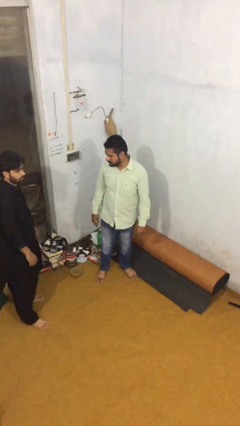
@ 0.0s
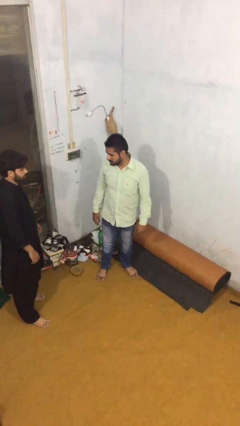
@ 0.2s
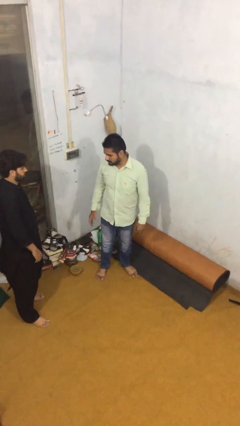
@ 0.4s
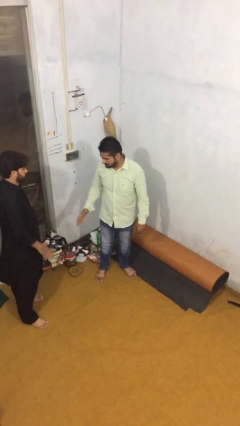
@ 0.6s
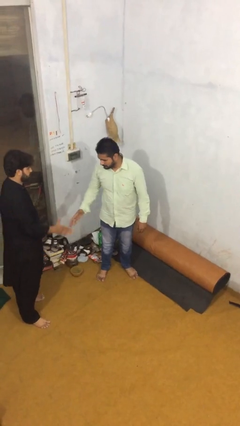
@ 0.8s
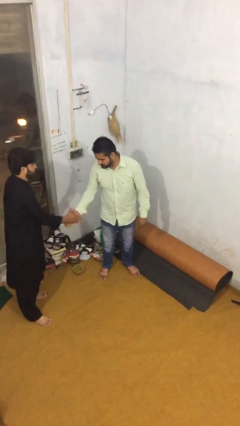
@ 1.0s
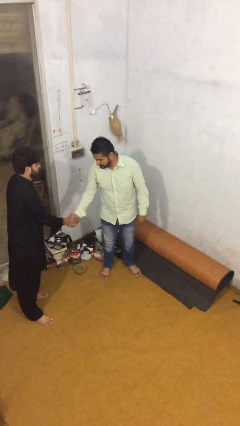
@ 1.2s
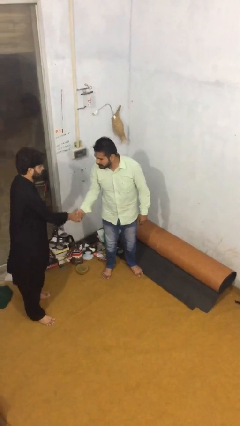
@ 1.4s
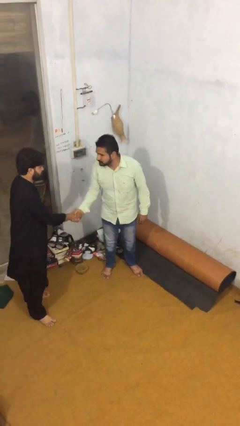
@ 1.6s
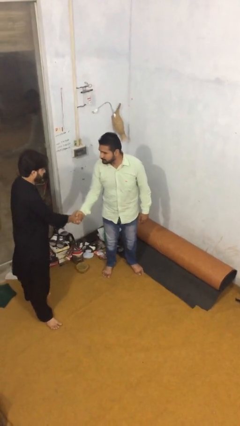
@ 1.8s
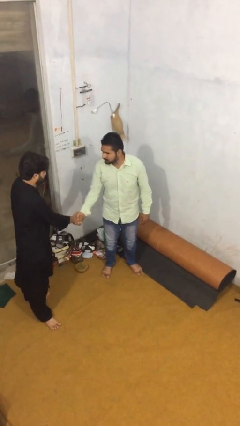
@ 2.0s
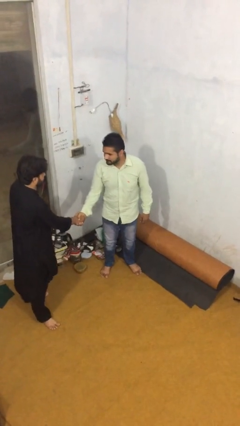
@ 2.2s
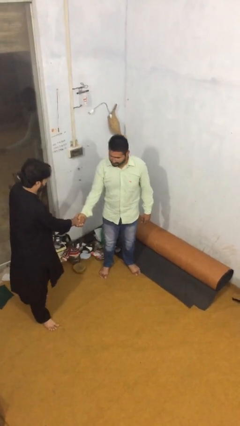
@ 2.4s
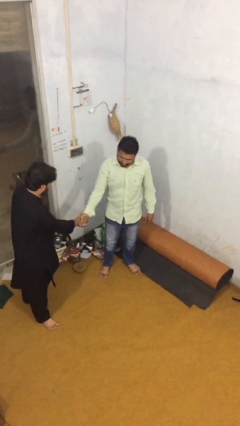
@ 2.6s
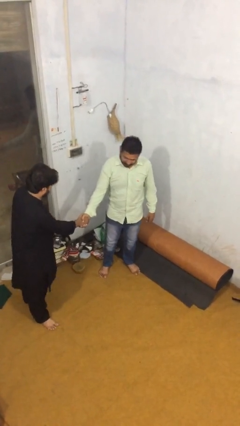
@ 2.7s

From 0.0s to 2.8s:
person shakes hand

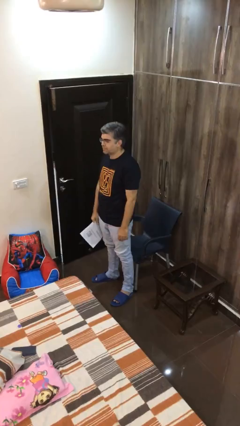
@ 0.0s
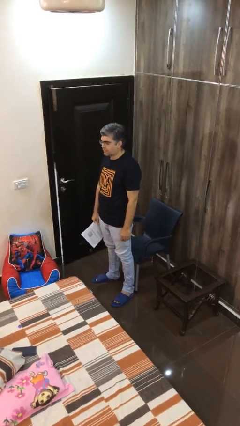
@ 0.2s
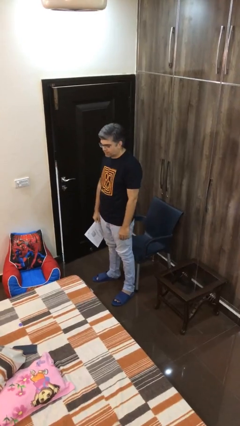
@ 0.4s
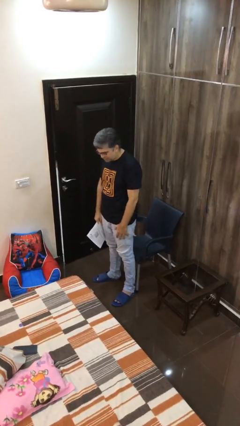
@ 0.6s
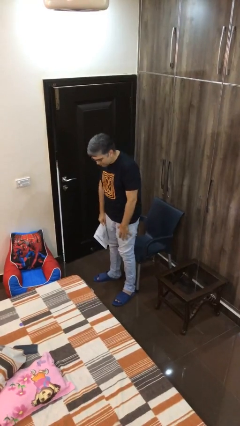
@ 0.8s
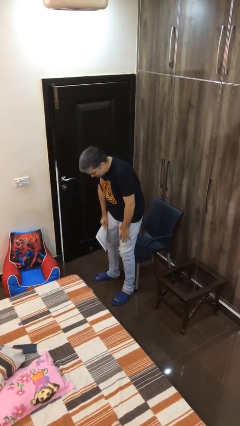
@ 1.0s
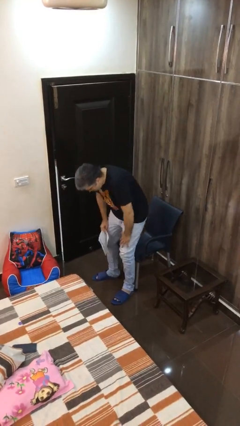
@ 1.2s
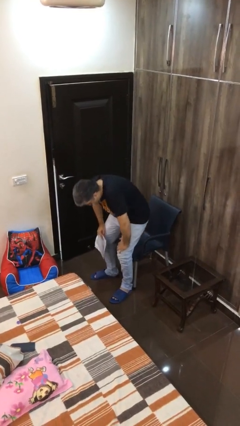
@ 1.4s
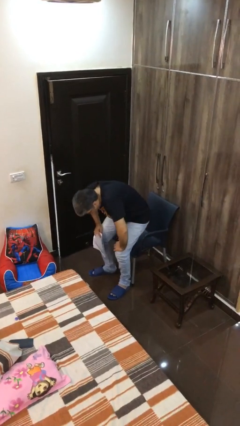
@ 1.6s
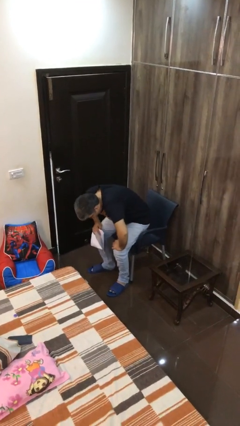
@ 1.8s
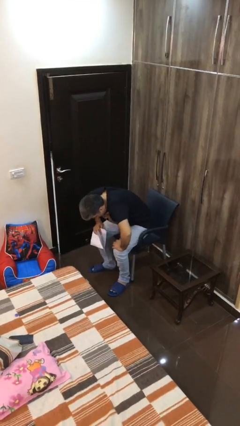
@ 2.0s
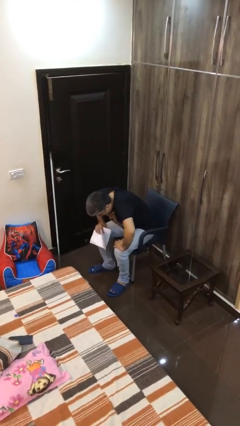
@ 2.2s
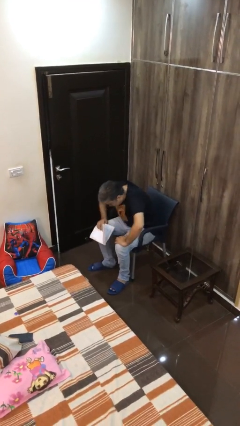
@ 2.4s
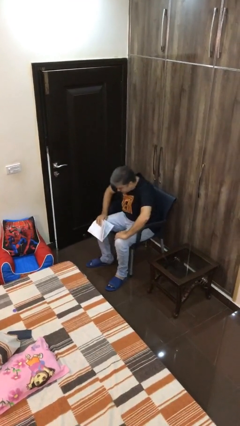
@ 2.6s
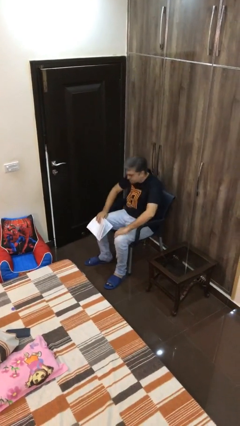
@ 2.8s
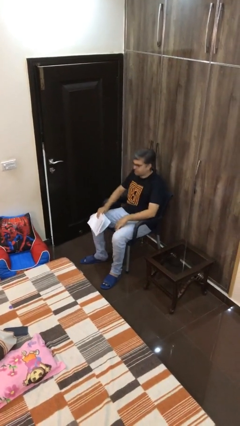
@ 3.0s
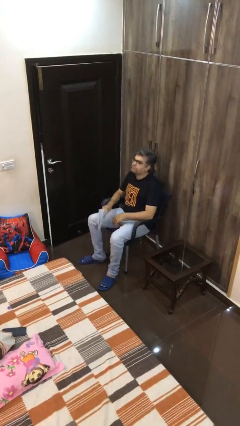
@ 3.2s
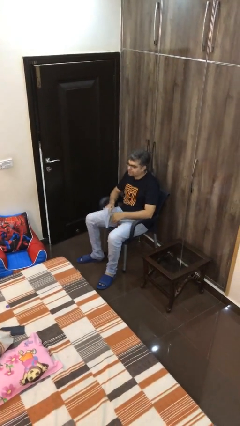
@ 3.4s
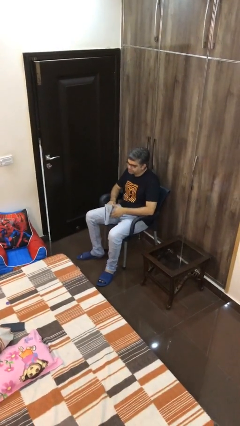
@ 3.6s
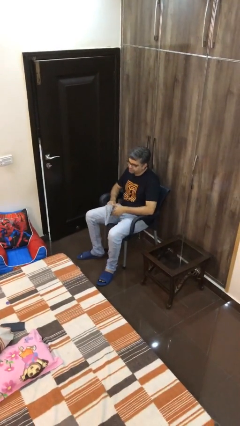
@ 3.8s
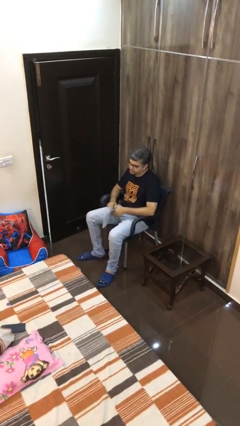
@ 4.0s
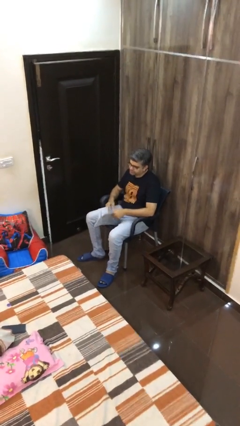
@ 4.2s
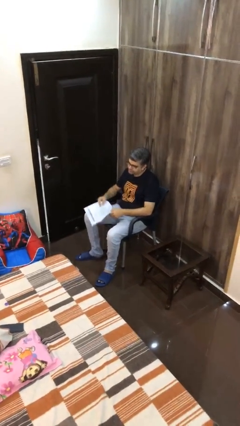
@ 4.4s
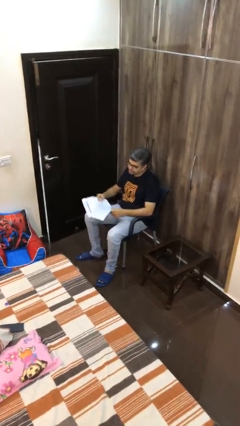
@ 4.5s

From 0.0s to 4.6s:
person sits down

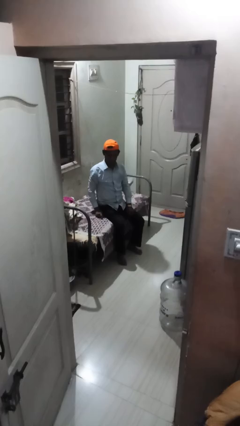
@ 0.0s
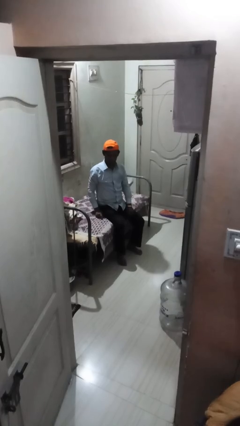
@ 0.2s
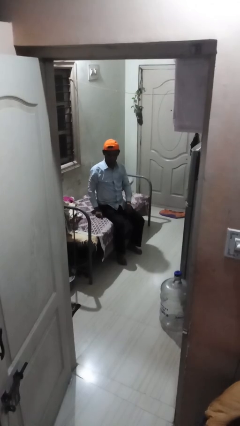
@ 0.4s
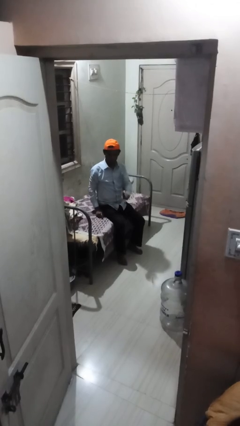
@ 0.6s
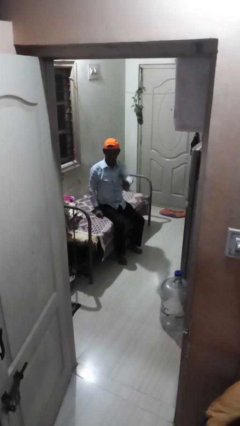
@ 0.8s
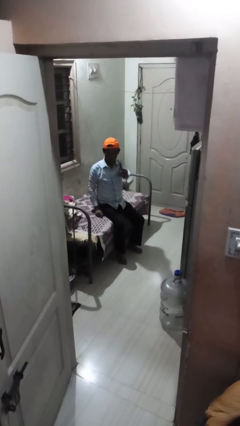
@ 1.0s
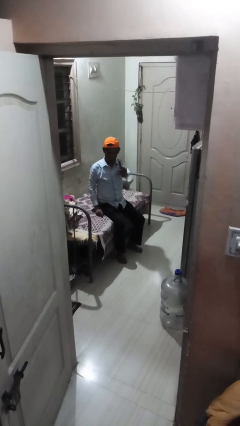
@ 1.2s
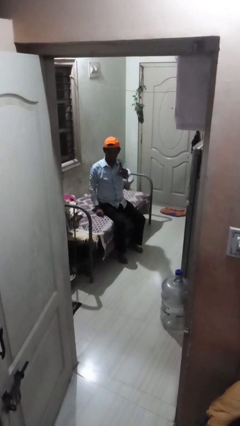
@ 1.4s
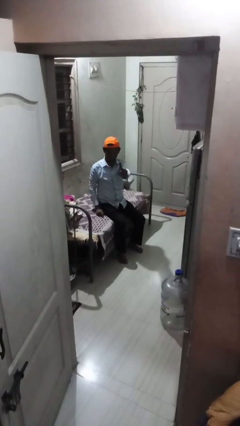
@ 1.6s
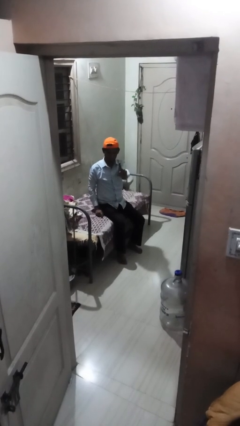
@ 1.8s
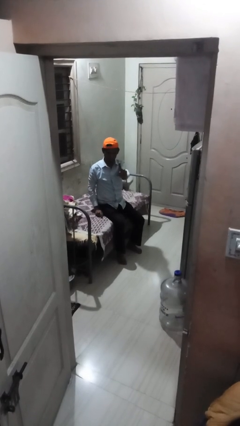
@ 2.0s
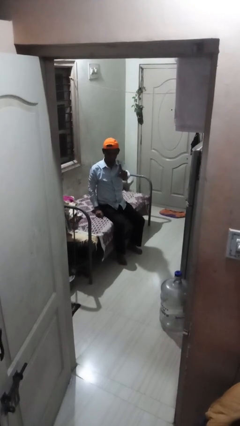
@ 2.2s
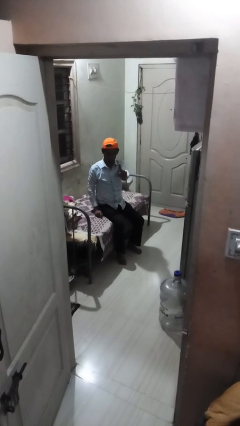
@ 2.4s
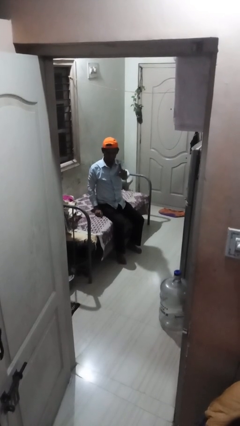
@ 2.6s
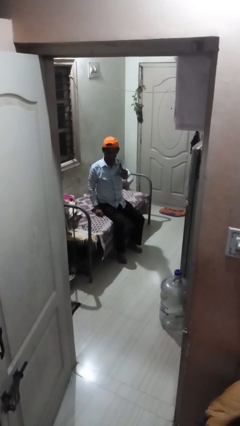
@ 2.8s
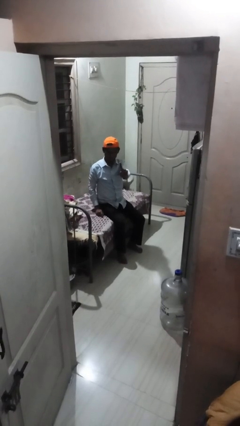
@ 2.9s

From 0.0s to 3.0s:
person gestures number one

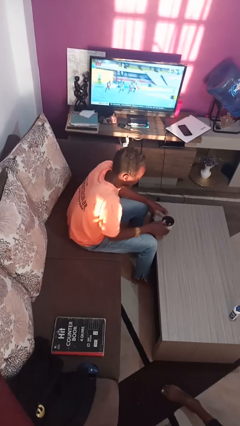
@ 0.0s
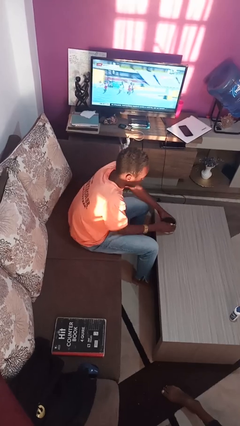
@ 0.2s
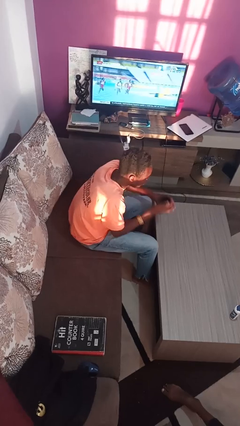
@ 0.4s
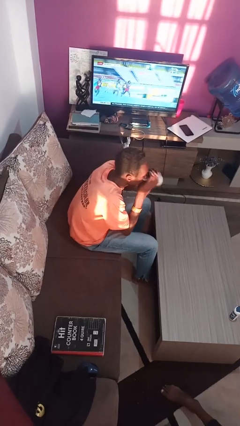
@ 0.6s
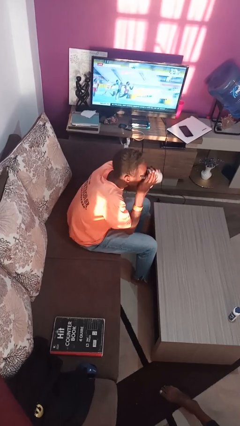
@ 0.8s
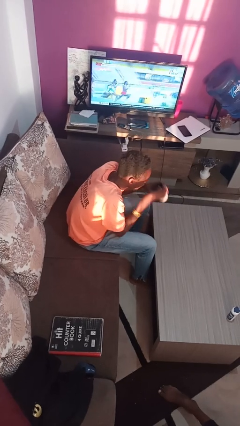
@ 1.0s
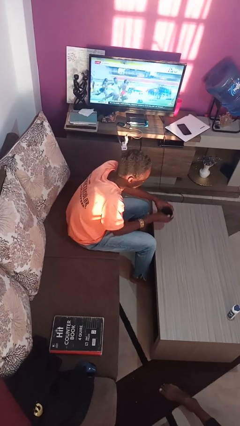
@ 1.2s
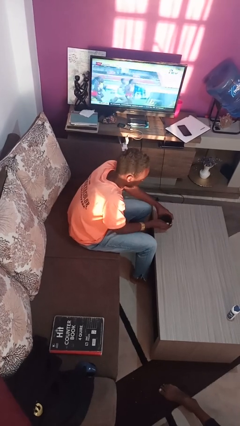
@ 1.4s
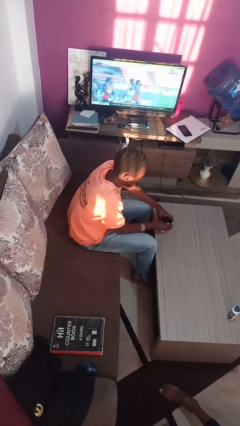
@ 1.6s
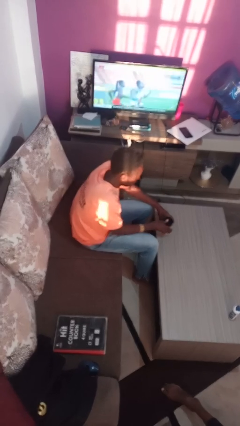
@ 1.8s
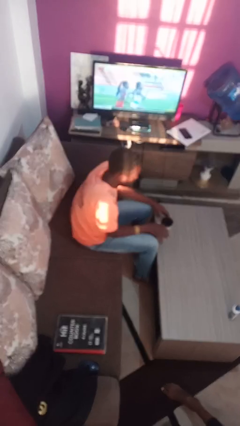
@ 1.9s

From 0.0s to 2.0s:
person drinks from mug

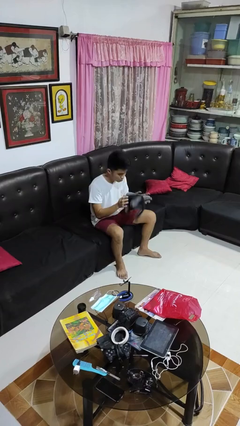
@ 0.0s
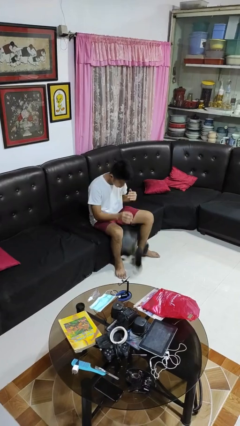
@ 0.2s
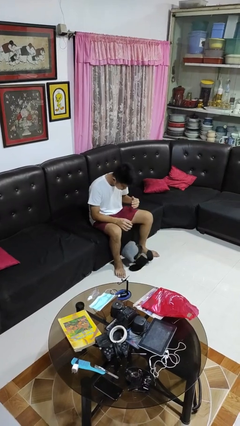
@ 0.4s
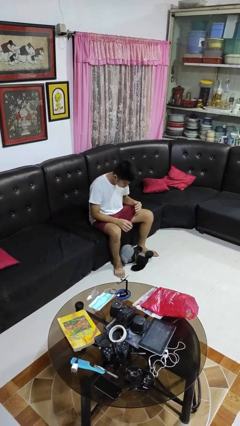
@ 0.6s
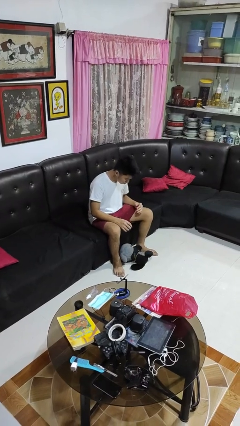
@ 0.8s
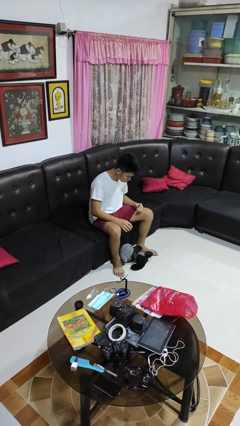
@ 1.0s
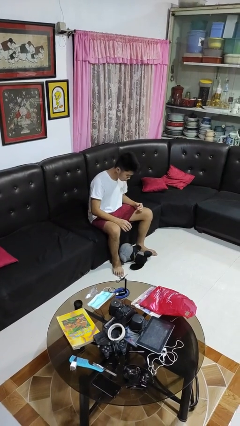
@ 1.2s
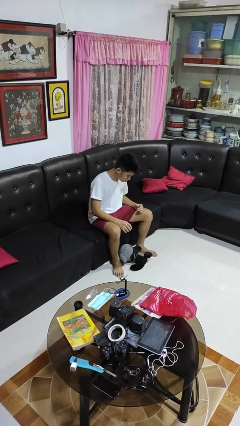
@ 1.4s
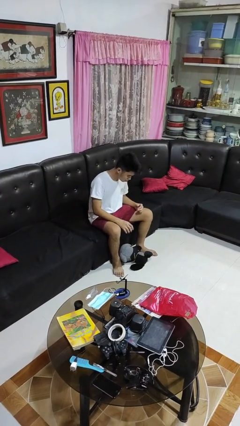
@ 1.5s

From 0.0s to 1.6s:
person drops object

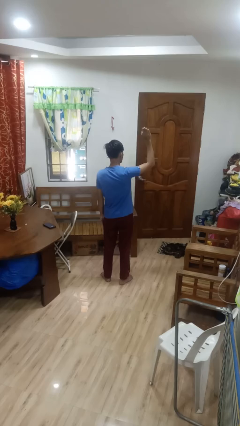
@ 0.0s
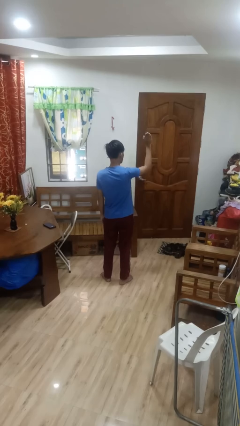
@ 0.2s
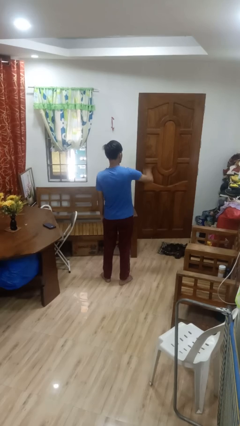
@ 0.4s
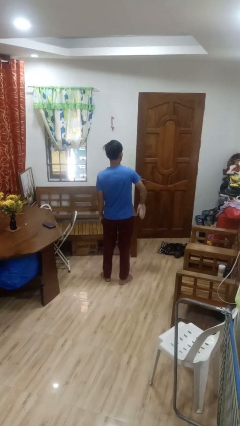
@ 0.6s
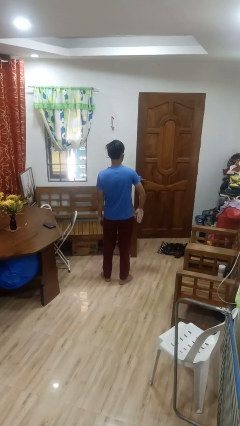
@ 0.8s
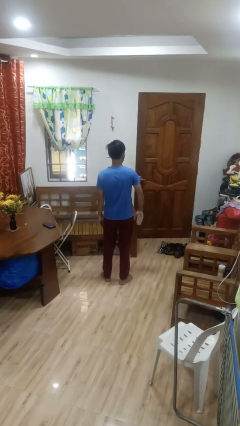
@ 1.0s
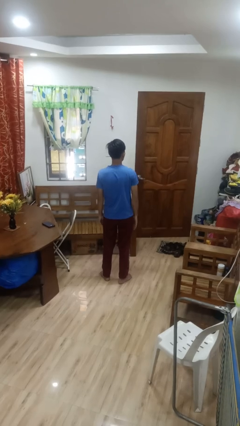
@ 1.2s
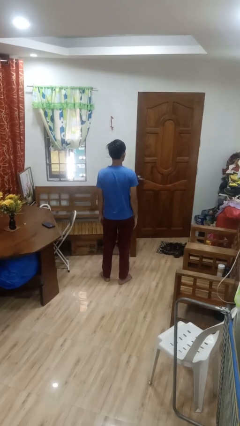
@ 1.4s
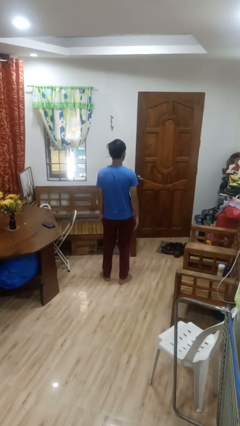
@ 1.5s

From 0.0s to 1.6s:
person gestures swipe down

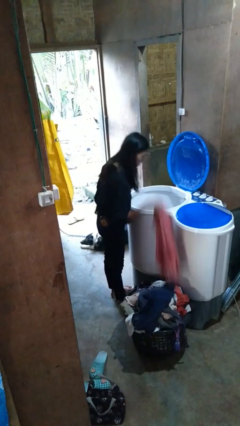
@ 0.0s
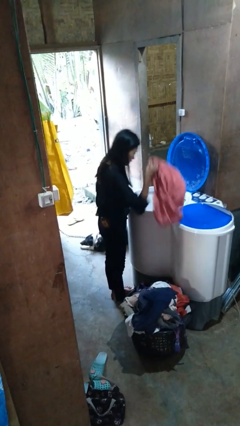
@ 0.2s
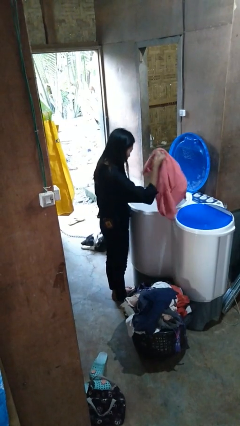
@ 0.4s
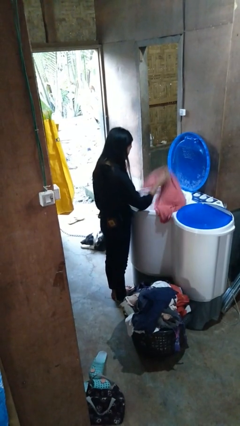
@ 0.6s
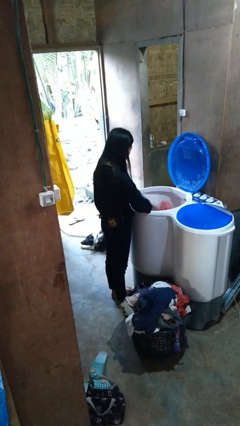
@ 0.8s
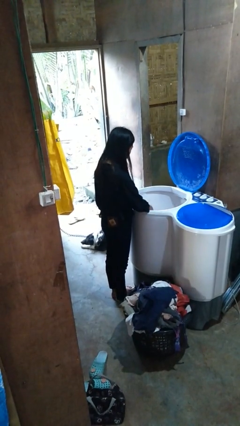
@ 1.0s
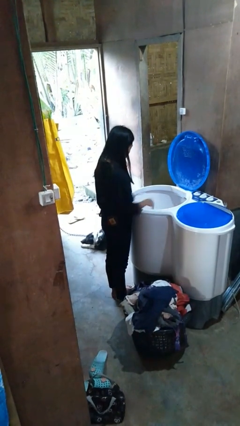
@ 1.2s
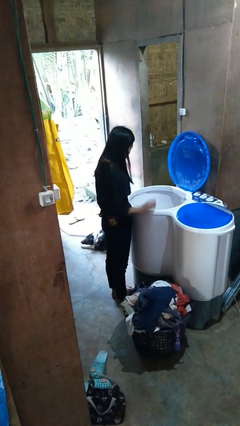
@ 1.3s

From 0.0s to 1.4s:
person loads clotheswasher
